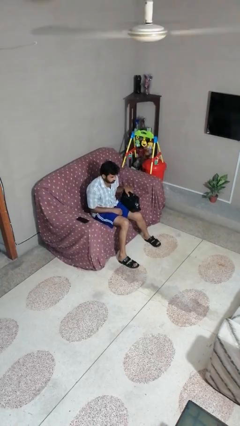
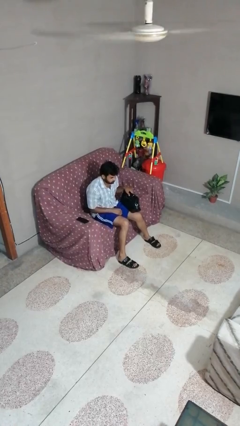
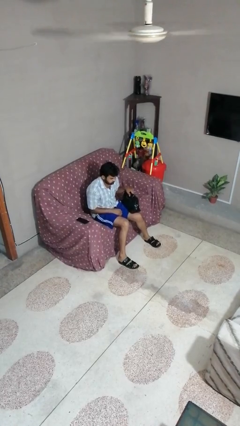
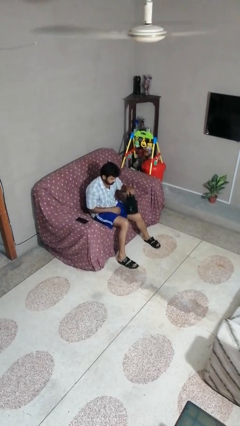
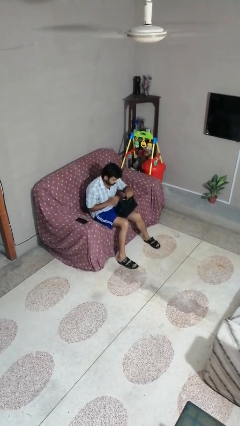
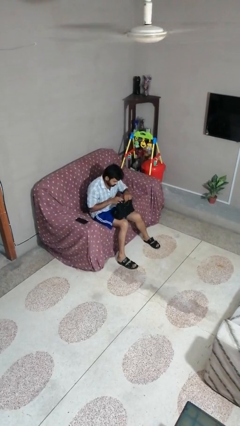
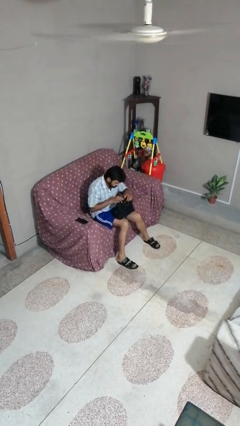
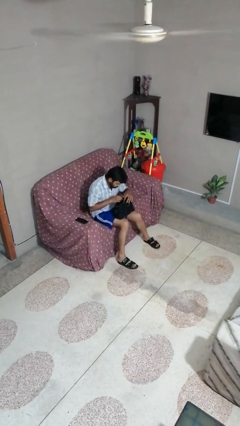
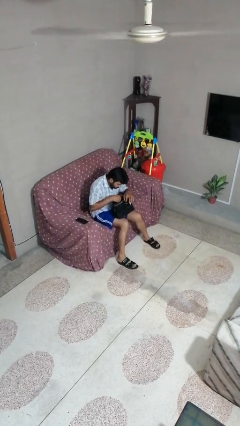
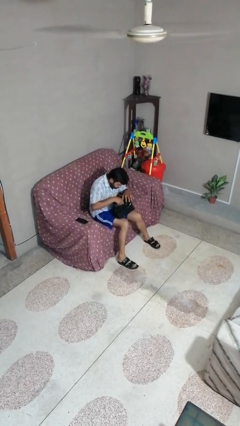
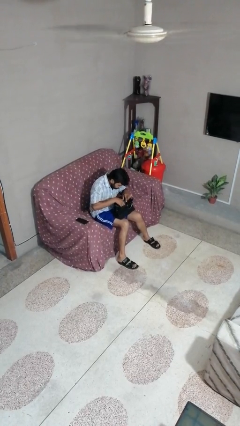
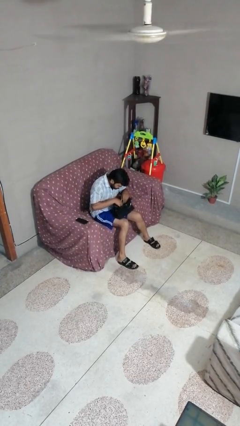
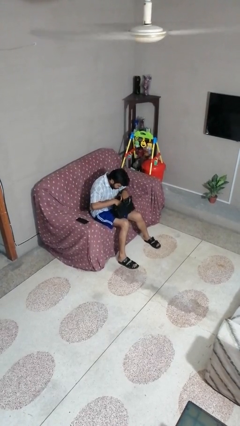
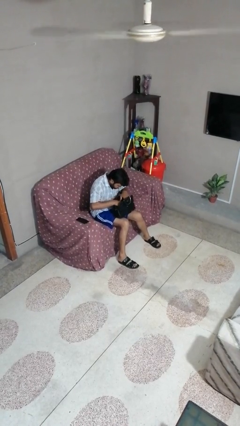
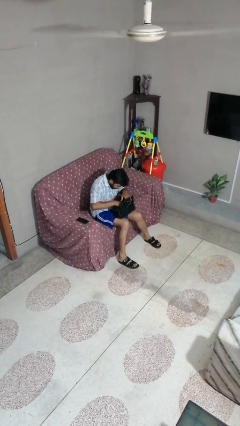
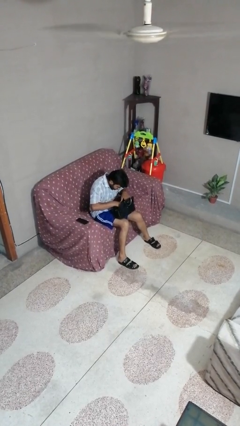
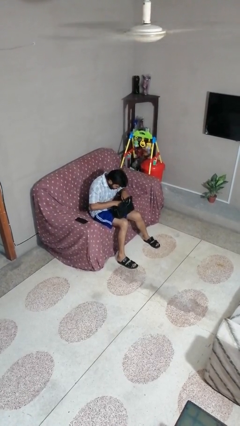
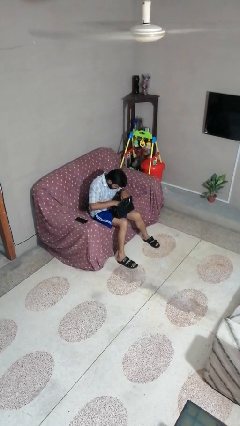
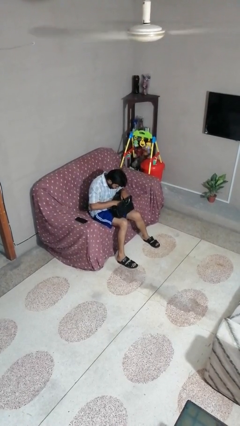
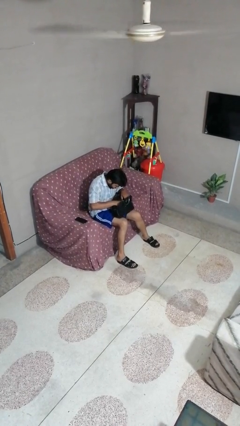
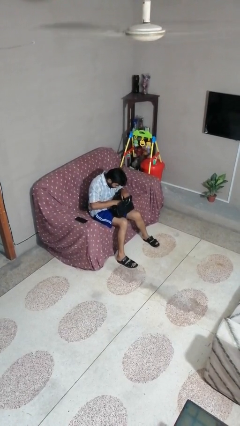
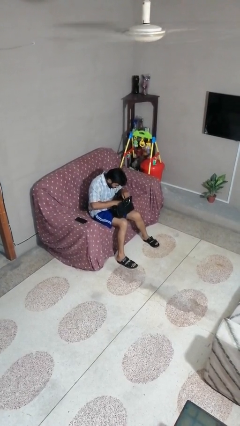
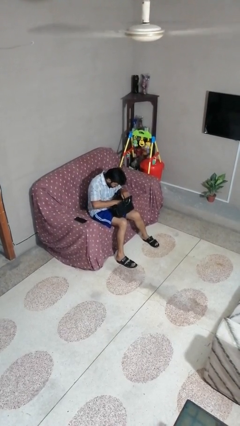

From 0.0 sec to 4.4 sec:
person searches in purse

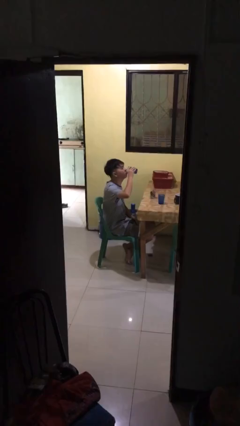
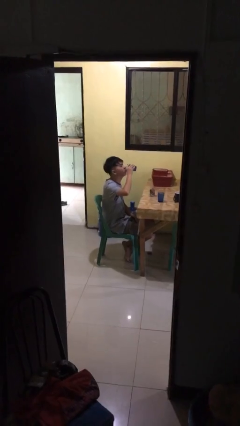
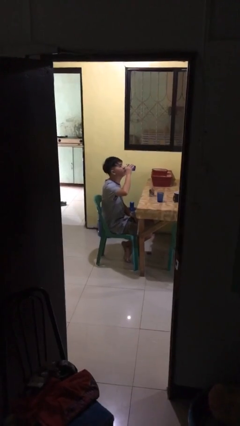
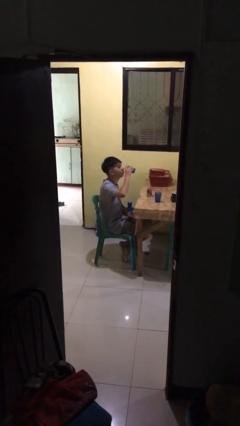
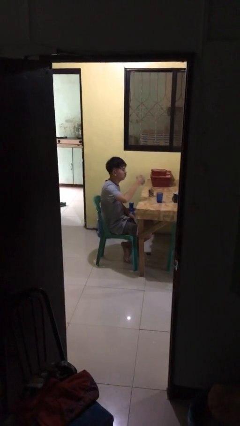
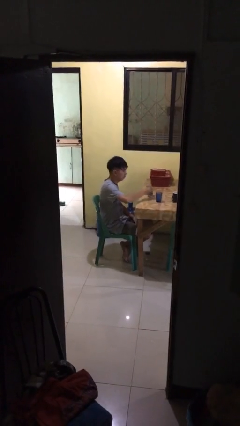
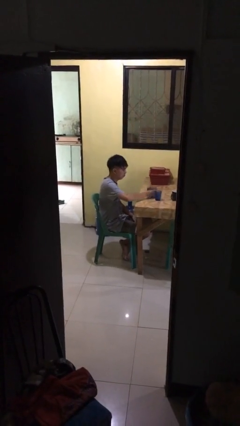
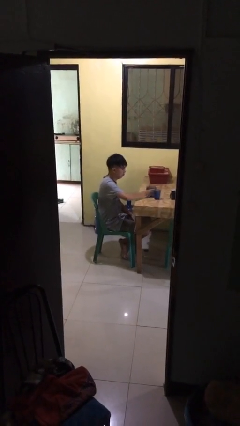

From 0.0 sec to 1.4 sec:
person puts down object on table

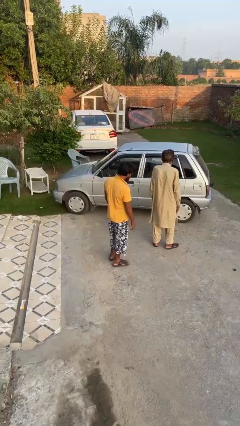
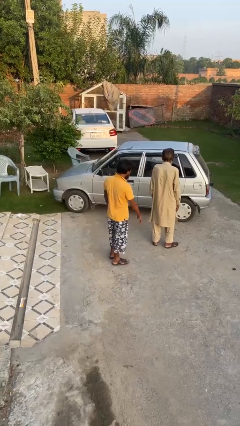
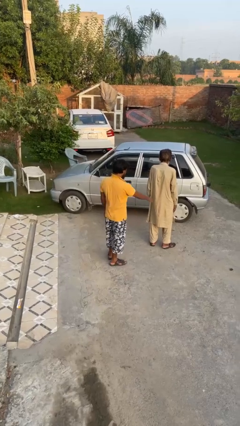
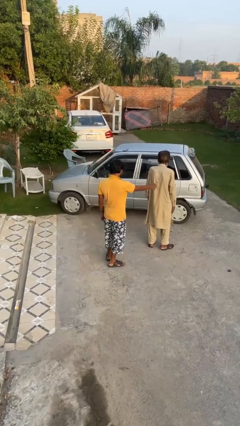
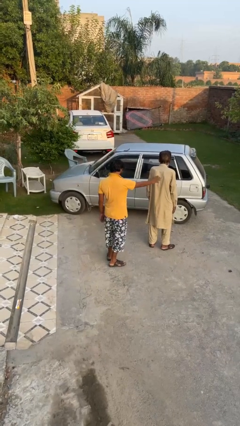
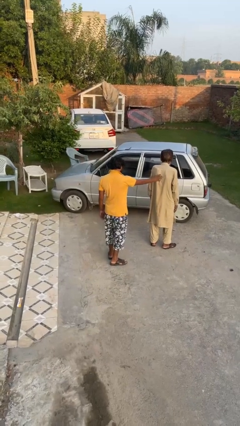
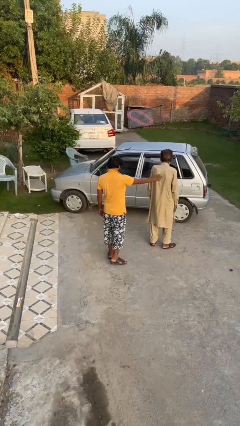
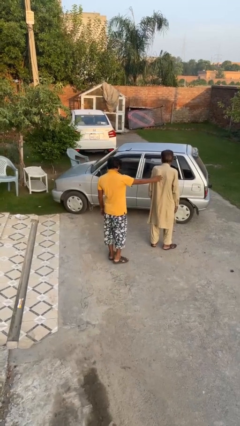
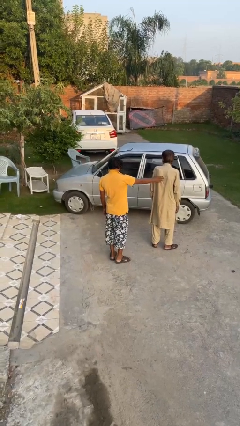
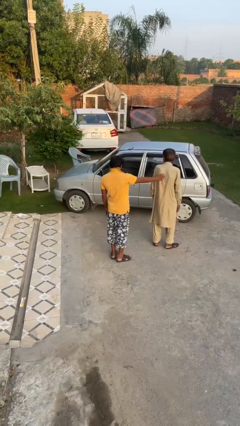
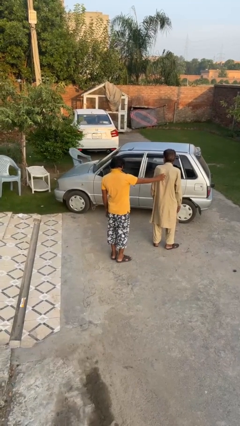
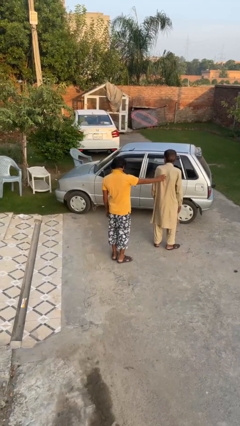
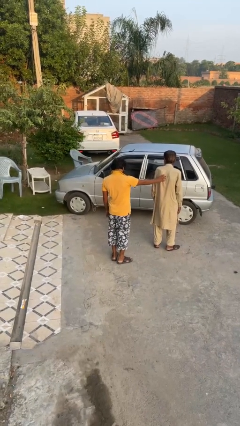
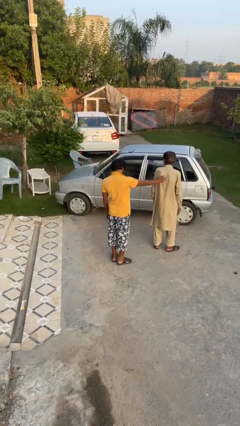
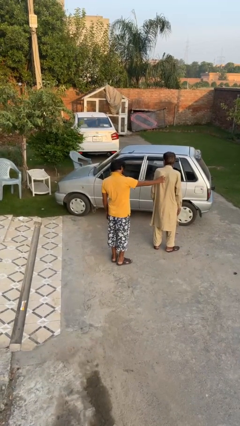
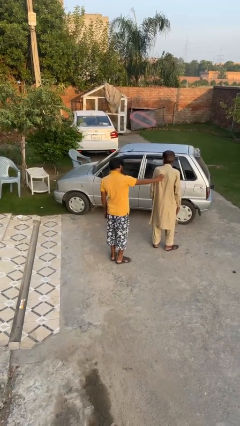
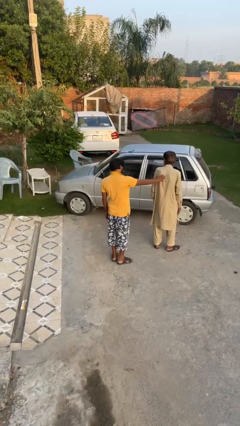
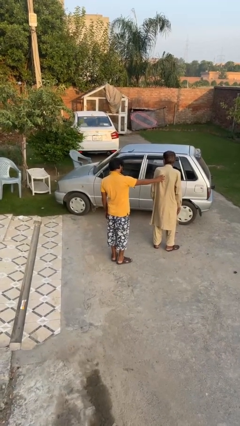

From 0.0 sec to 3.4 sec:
person touches back of person

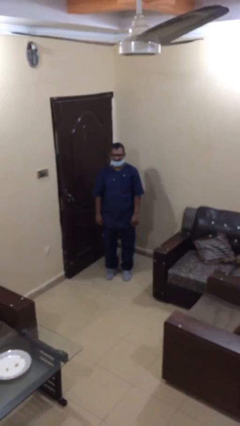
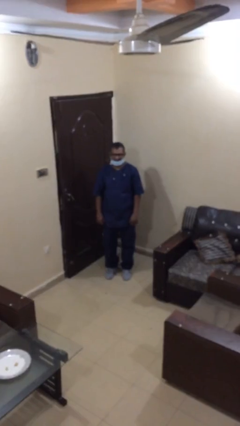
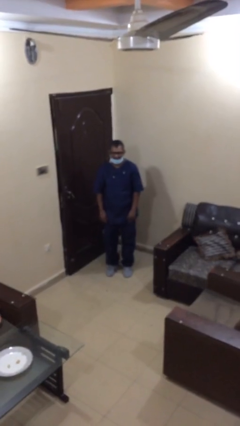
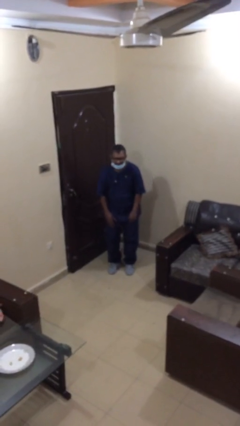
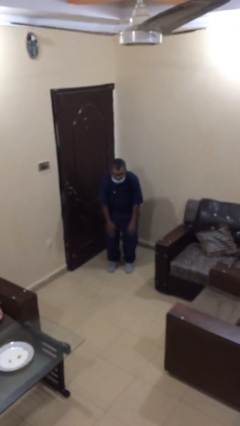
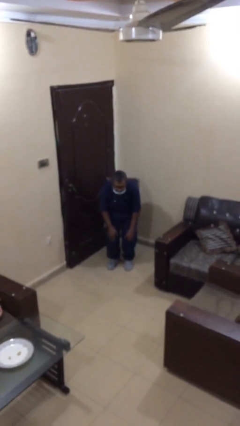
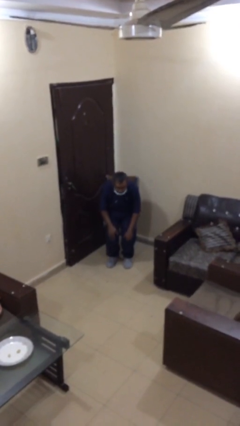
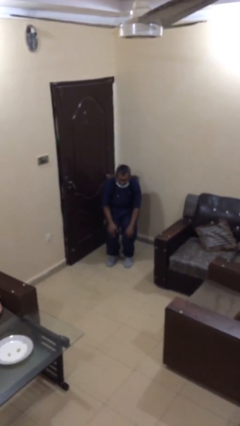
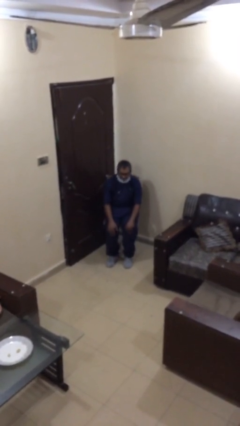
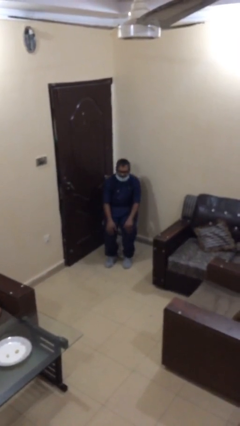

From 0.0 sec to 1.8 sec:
person sits down

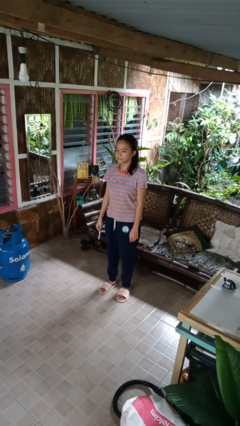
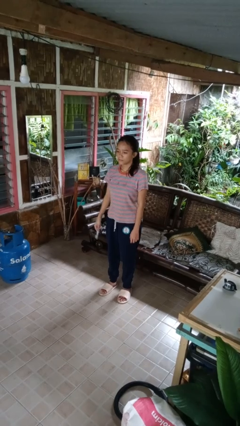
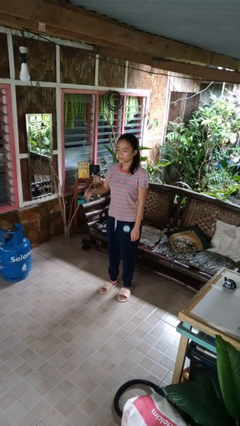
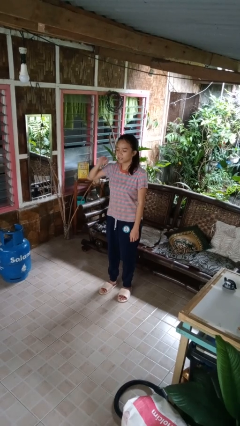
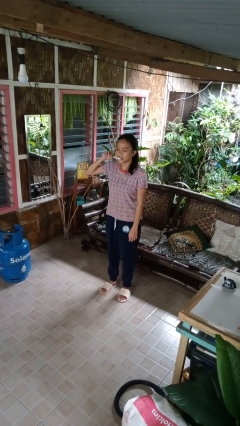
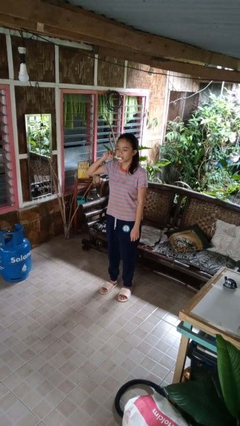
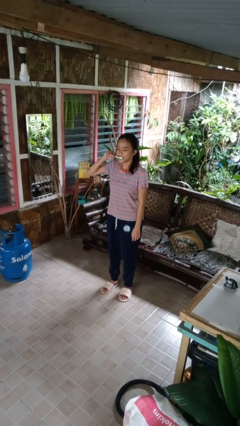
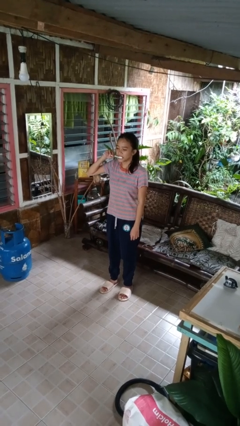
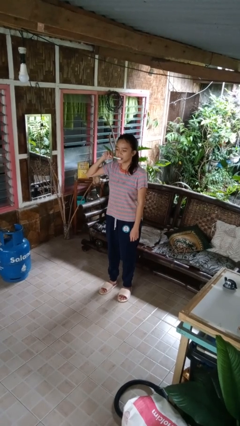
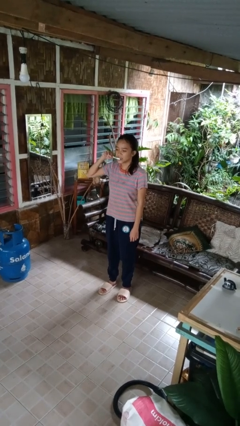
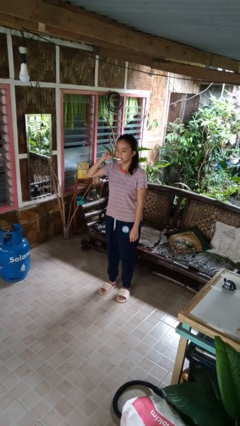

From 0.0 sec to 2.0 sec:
person brushes teeth

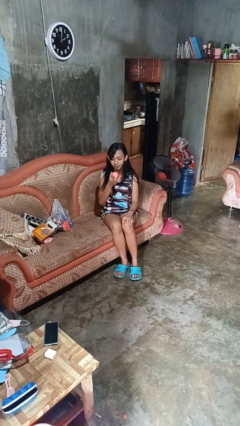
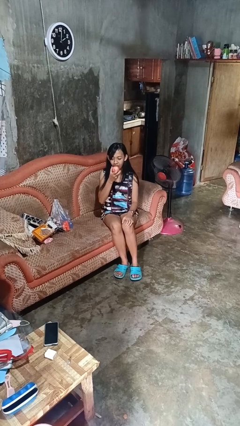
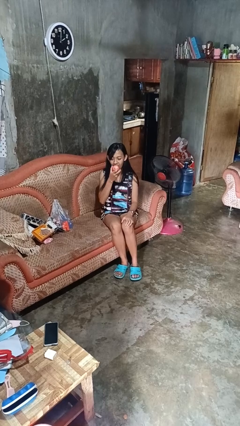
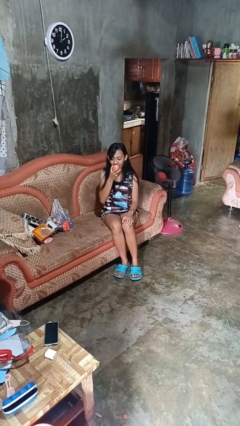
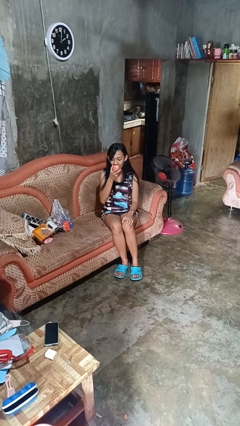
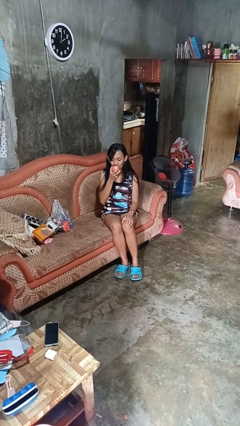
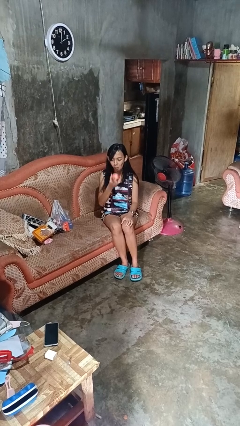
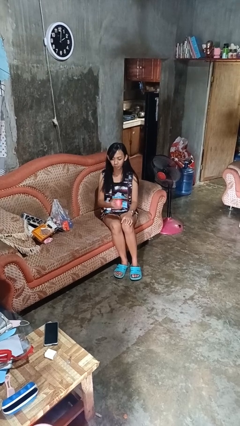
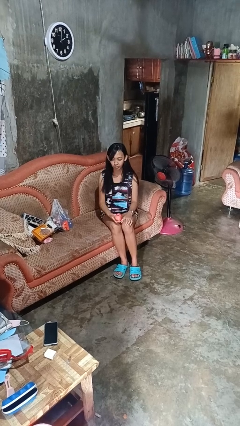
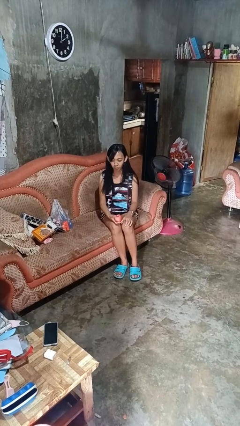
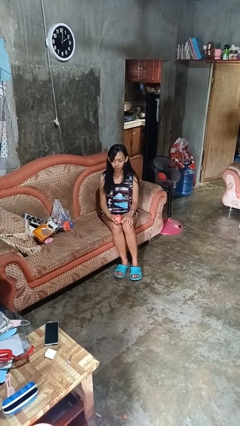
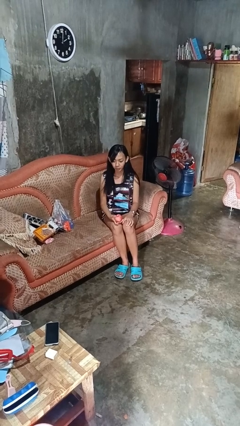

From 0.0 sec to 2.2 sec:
person eats apple

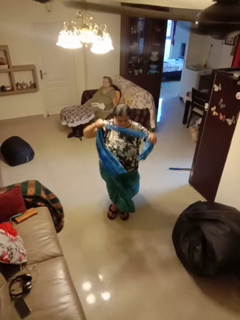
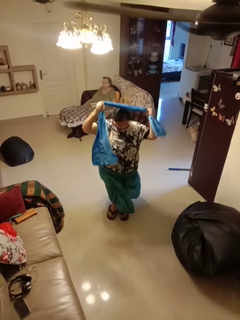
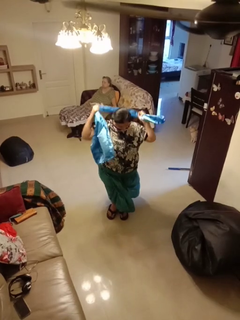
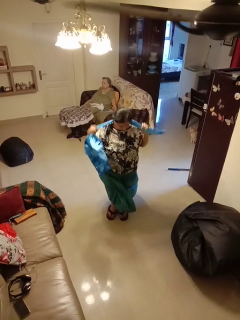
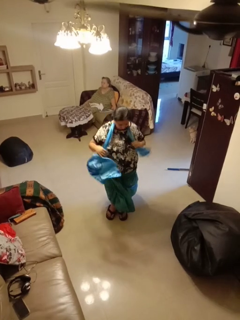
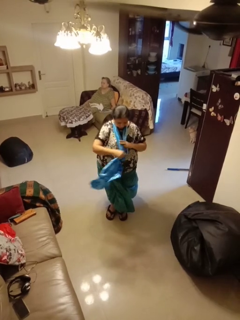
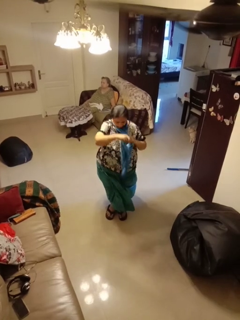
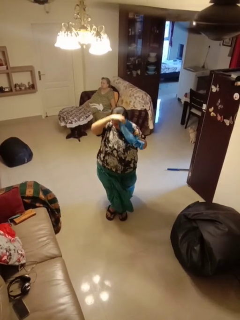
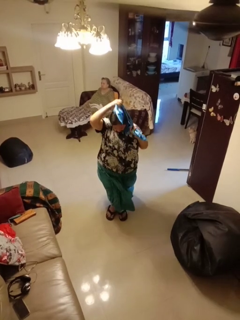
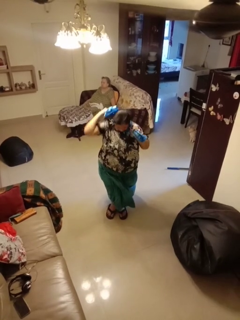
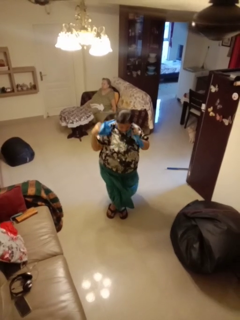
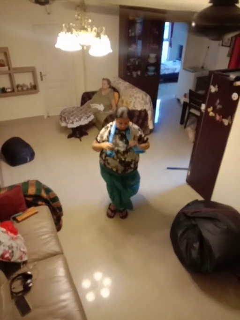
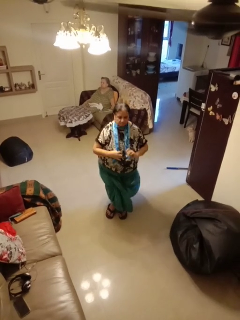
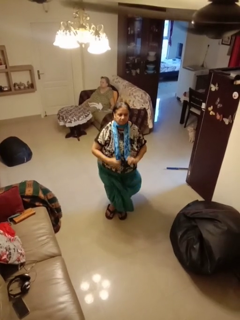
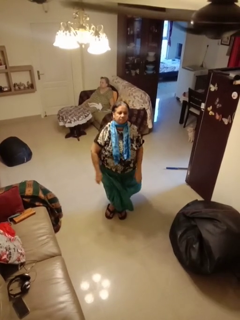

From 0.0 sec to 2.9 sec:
person puts on scarf
